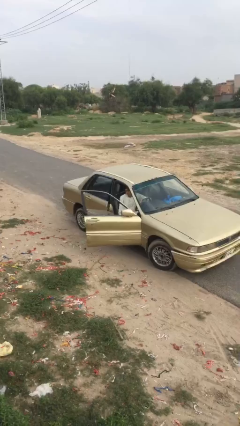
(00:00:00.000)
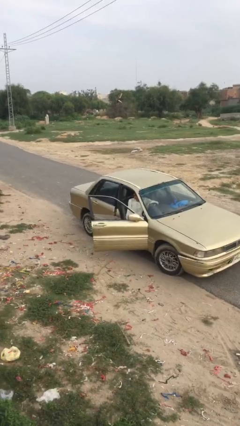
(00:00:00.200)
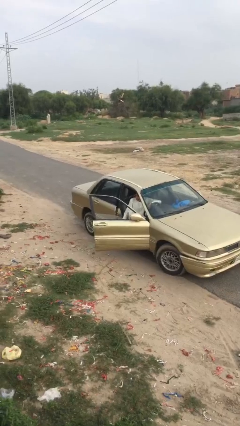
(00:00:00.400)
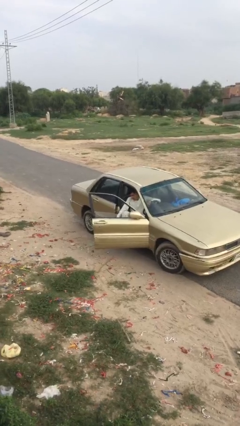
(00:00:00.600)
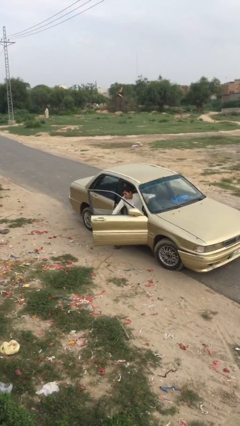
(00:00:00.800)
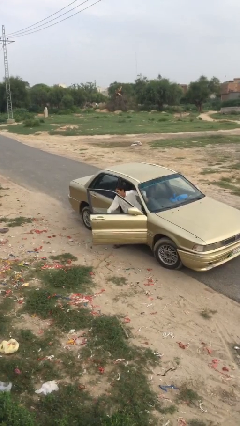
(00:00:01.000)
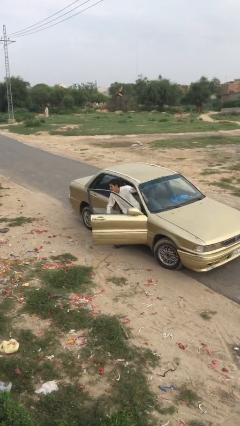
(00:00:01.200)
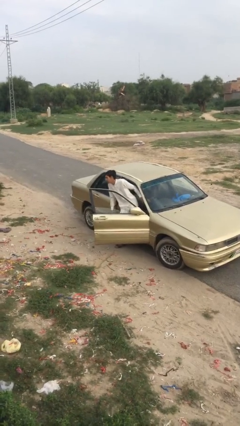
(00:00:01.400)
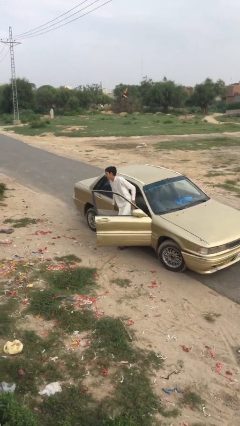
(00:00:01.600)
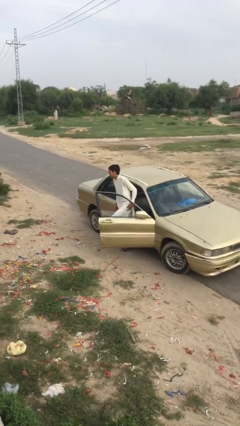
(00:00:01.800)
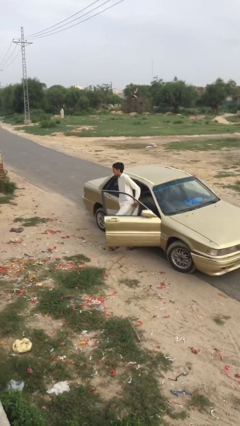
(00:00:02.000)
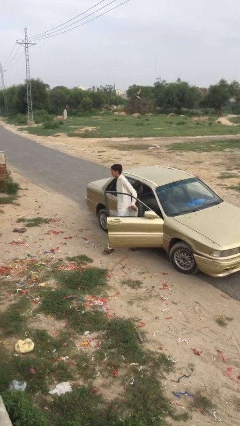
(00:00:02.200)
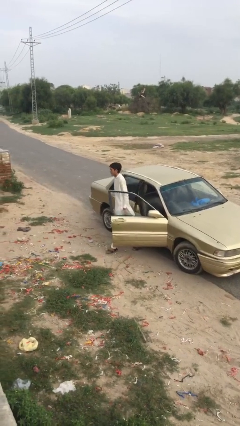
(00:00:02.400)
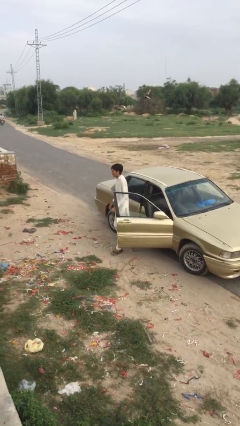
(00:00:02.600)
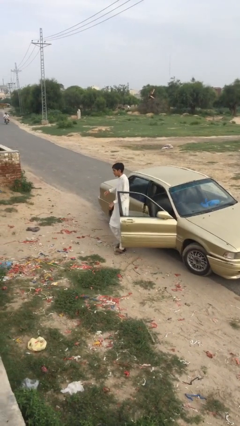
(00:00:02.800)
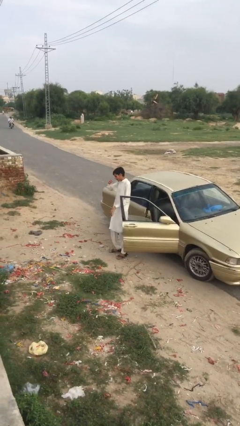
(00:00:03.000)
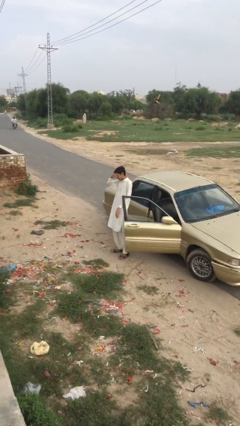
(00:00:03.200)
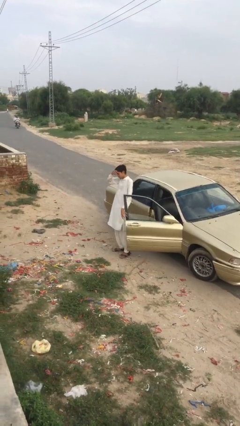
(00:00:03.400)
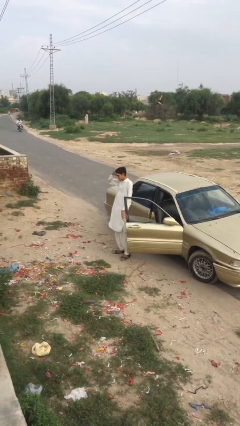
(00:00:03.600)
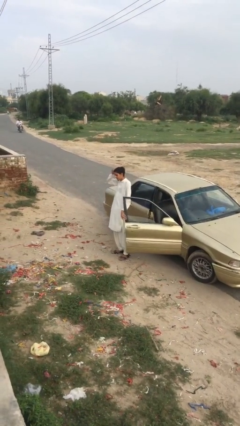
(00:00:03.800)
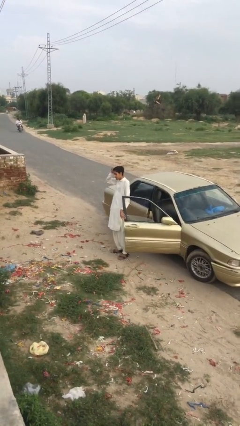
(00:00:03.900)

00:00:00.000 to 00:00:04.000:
person exits car

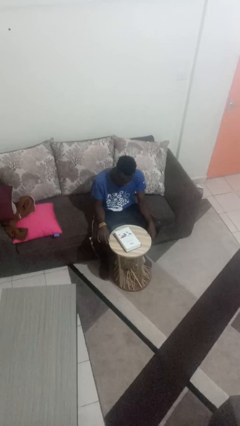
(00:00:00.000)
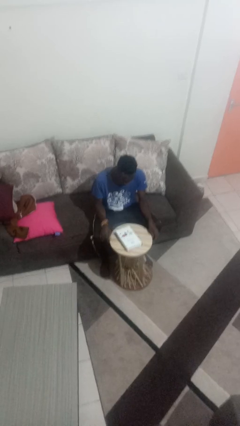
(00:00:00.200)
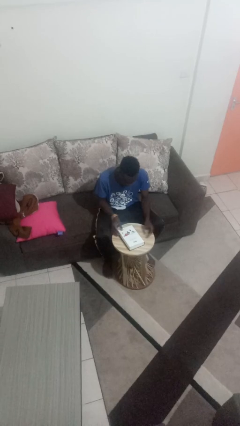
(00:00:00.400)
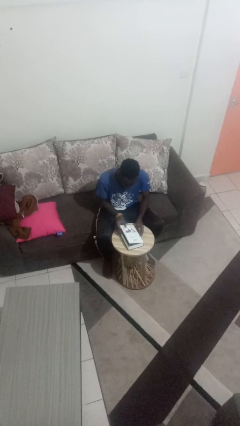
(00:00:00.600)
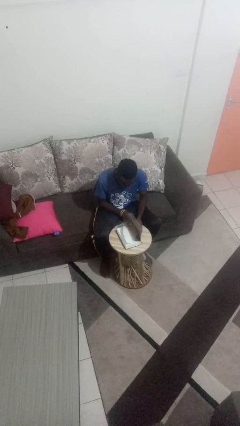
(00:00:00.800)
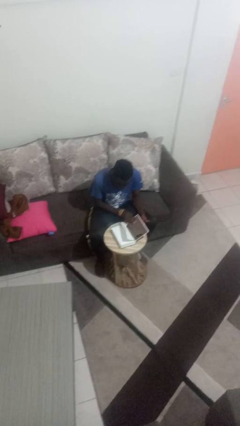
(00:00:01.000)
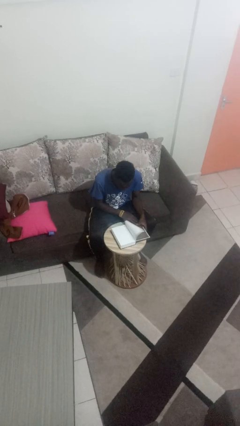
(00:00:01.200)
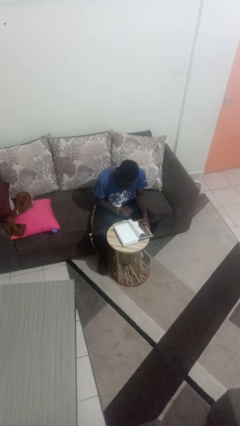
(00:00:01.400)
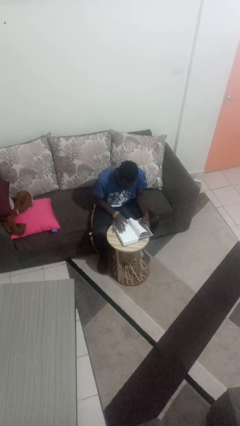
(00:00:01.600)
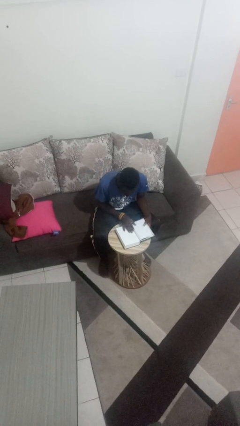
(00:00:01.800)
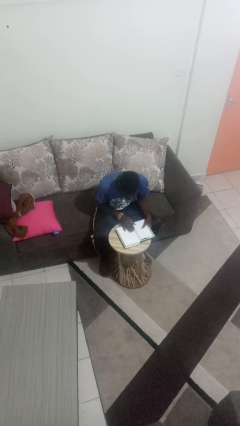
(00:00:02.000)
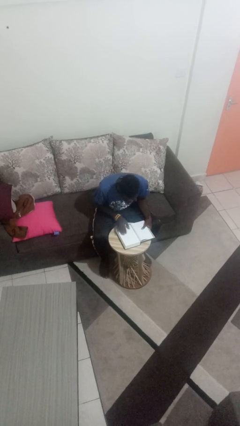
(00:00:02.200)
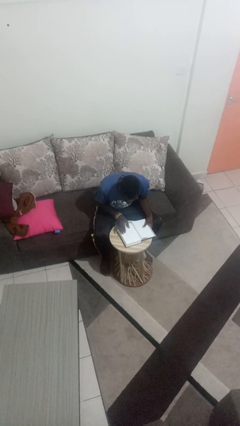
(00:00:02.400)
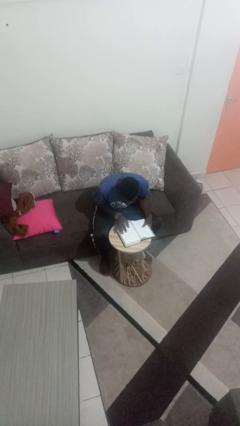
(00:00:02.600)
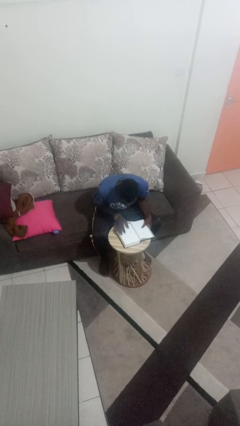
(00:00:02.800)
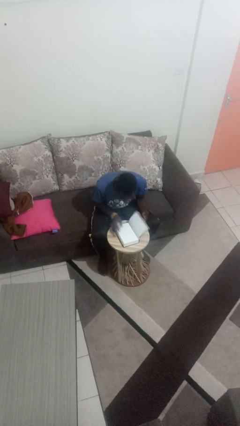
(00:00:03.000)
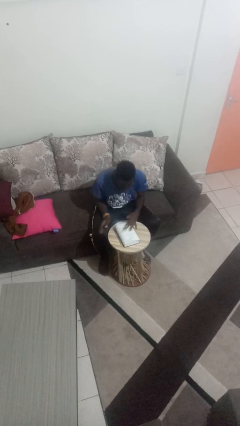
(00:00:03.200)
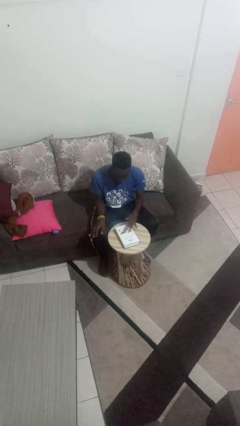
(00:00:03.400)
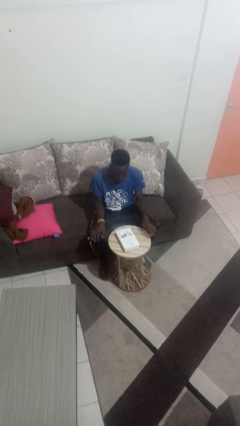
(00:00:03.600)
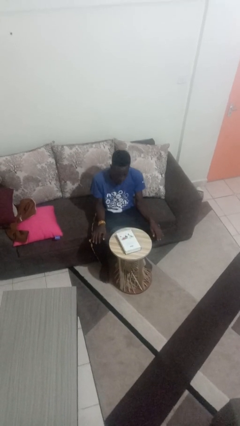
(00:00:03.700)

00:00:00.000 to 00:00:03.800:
person reads book

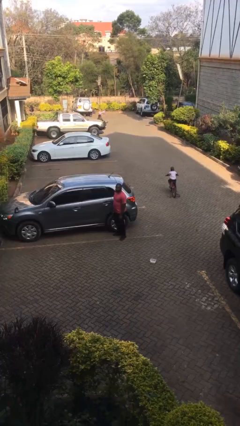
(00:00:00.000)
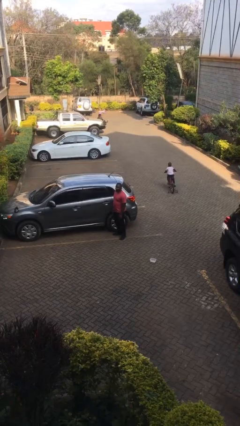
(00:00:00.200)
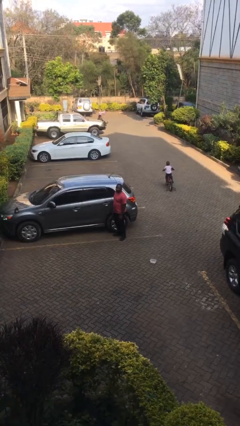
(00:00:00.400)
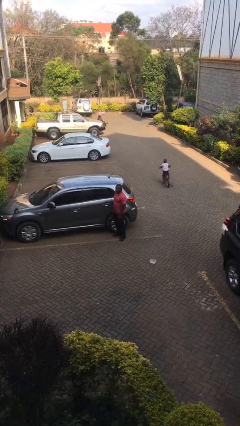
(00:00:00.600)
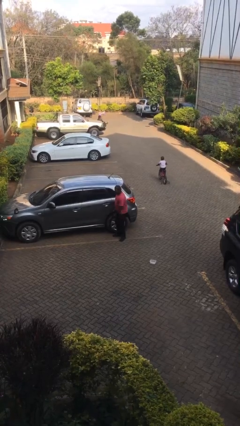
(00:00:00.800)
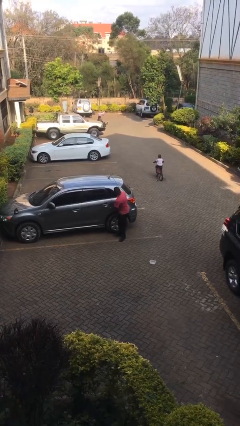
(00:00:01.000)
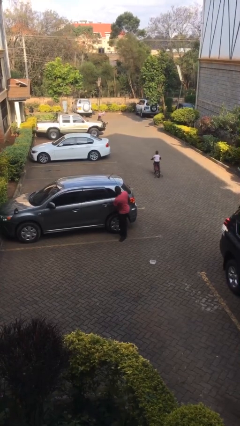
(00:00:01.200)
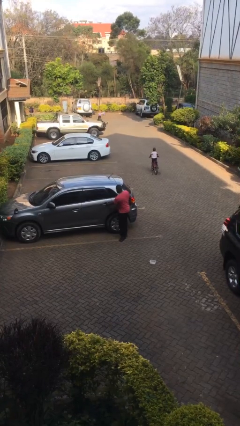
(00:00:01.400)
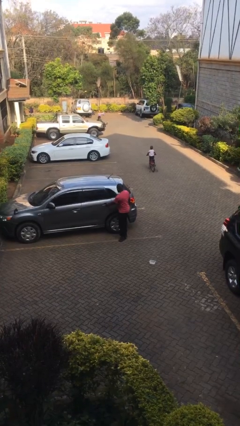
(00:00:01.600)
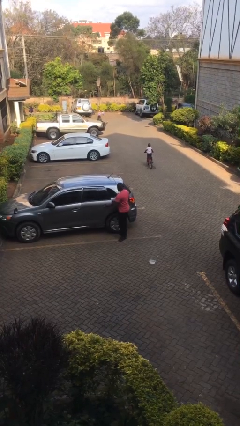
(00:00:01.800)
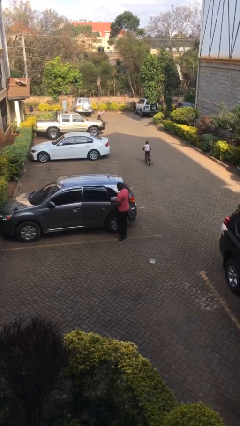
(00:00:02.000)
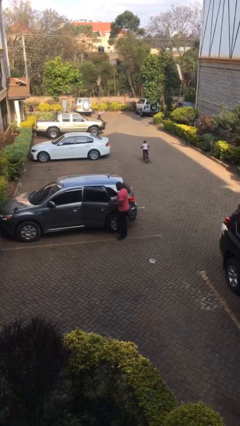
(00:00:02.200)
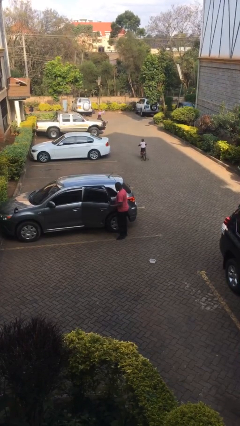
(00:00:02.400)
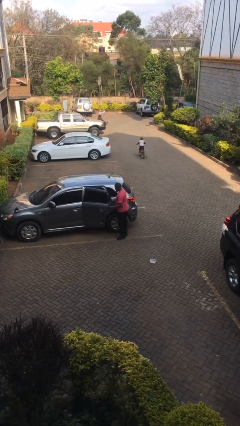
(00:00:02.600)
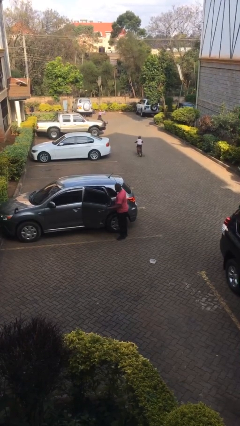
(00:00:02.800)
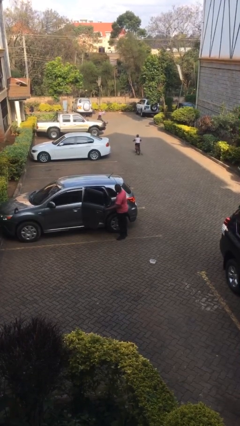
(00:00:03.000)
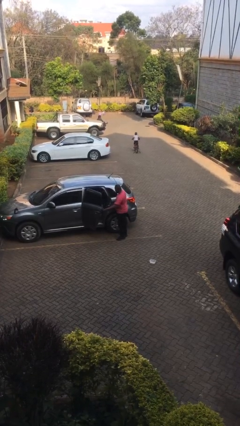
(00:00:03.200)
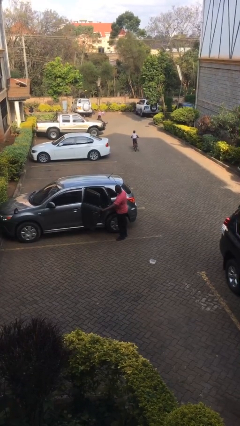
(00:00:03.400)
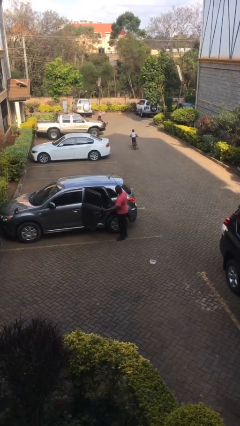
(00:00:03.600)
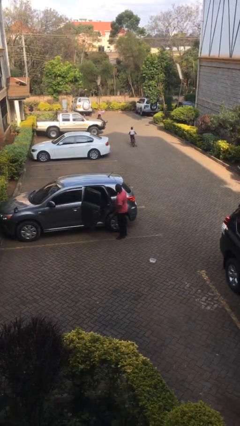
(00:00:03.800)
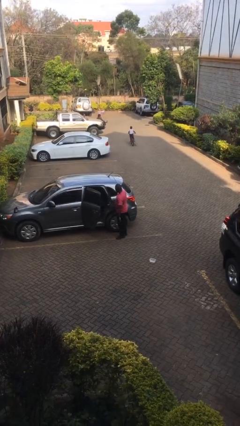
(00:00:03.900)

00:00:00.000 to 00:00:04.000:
person opens car door

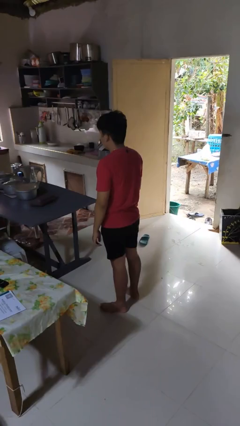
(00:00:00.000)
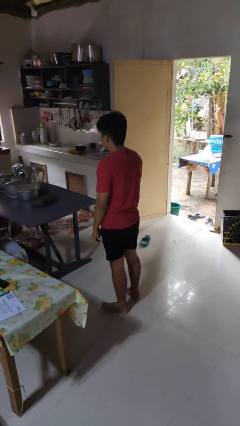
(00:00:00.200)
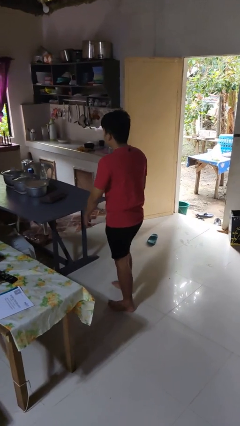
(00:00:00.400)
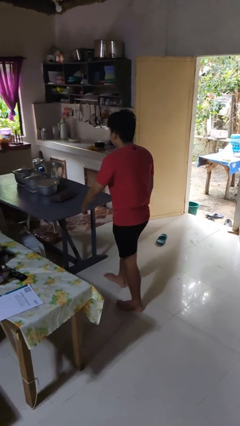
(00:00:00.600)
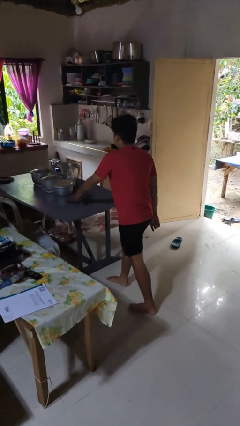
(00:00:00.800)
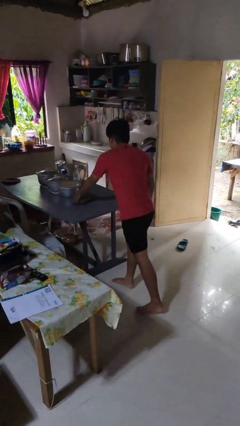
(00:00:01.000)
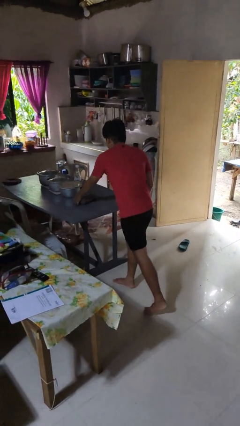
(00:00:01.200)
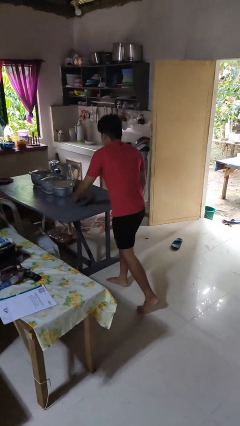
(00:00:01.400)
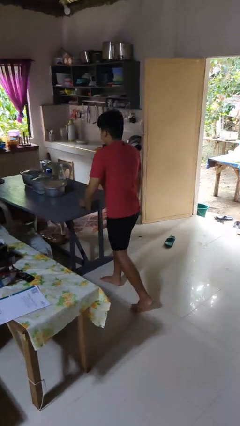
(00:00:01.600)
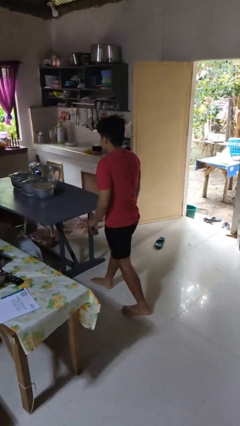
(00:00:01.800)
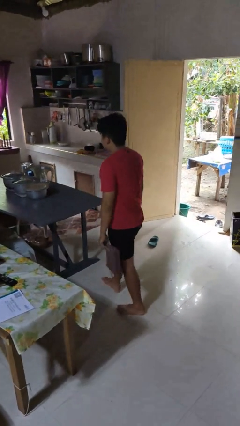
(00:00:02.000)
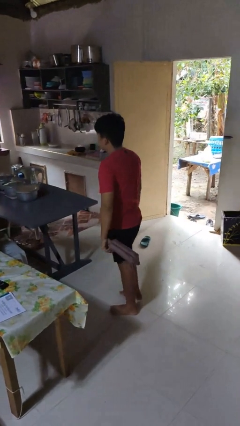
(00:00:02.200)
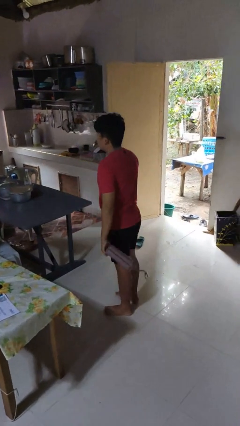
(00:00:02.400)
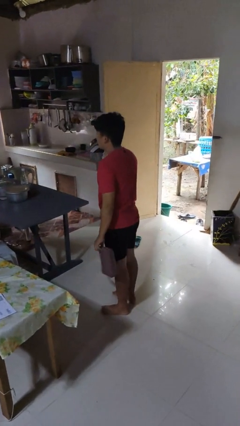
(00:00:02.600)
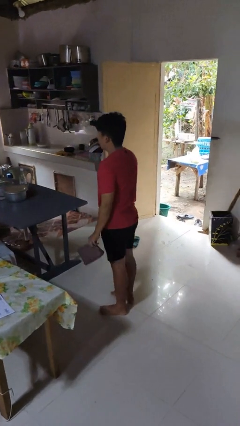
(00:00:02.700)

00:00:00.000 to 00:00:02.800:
person picks up object from table

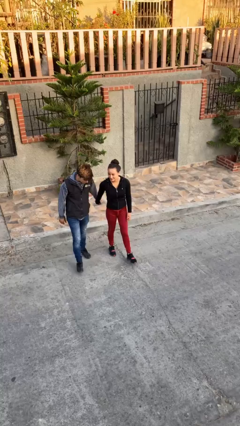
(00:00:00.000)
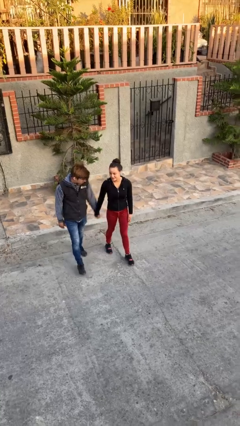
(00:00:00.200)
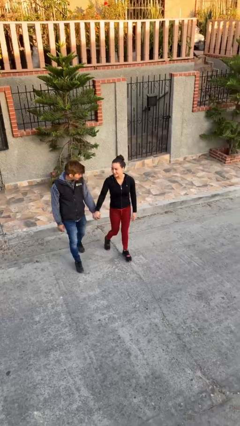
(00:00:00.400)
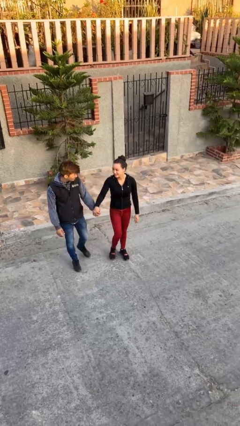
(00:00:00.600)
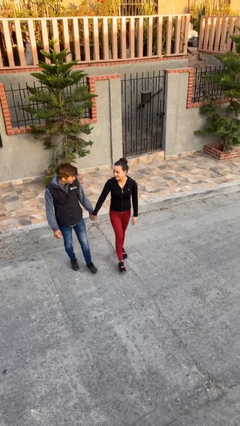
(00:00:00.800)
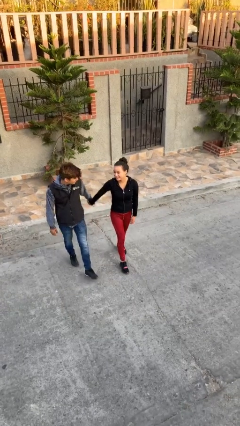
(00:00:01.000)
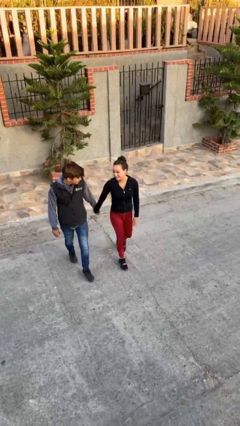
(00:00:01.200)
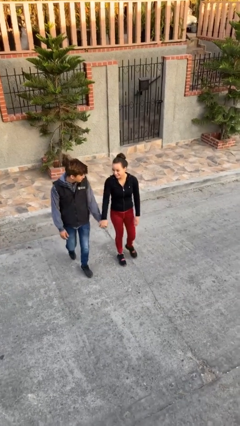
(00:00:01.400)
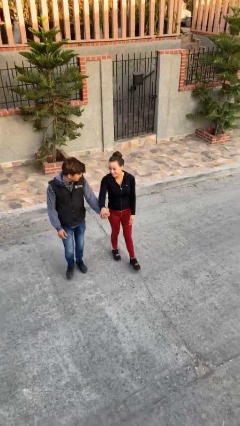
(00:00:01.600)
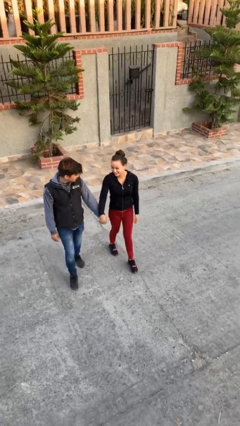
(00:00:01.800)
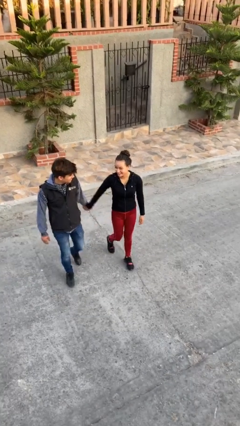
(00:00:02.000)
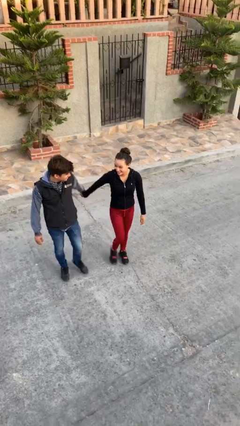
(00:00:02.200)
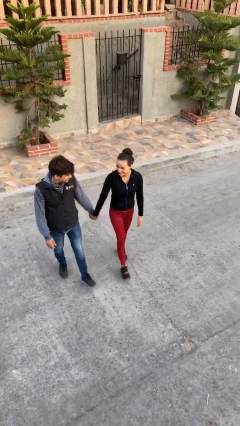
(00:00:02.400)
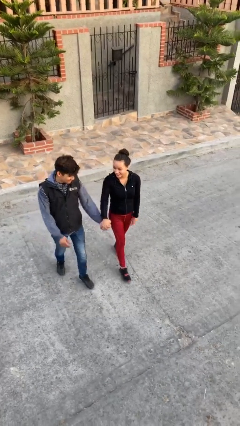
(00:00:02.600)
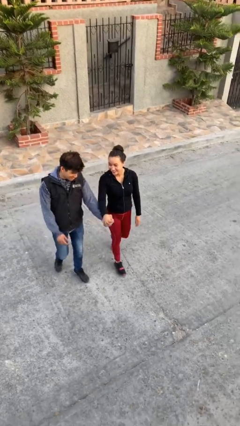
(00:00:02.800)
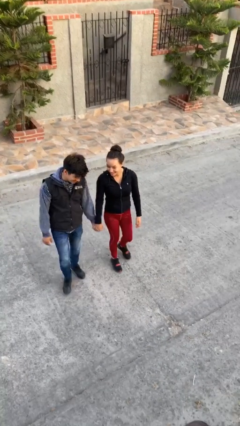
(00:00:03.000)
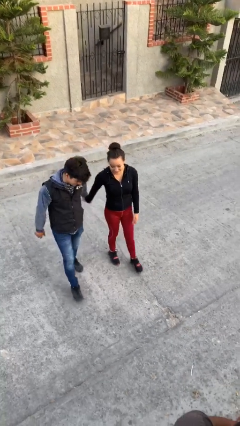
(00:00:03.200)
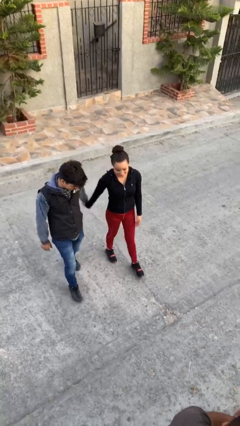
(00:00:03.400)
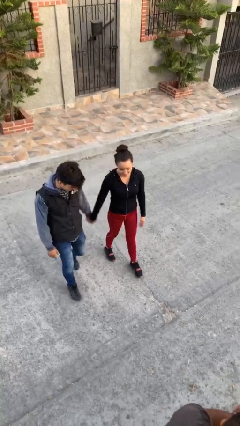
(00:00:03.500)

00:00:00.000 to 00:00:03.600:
person holds hand
